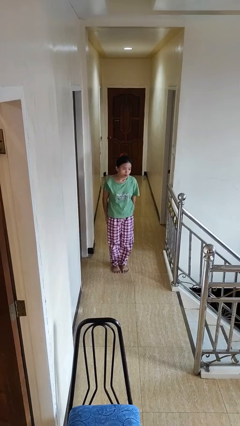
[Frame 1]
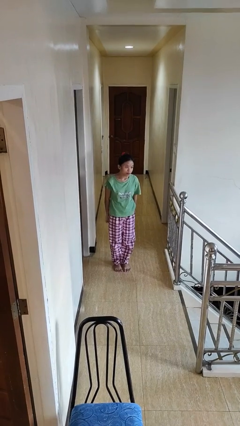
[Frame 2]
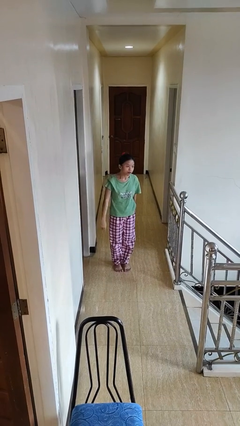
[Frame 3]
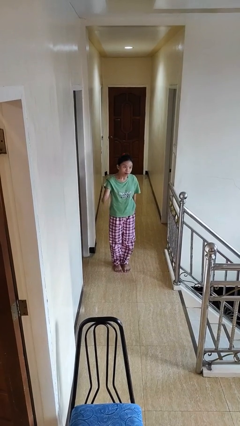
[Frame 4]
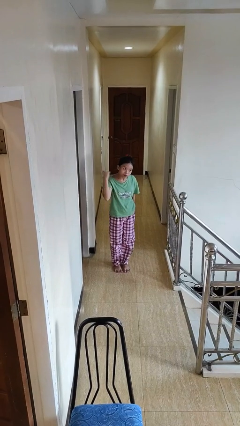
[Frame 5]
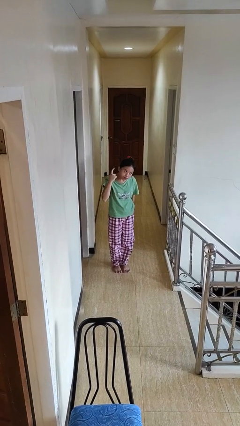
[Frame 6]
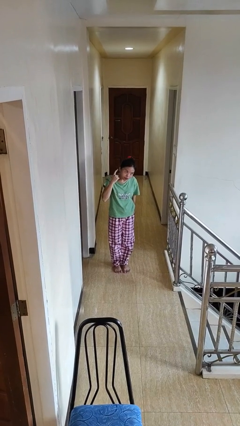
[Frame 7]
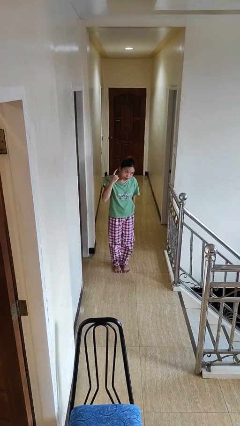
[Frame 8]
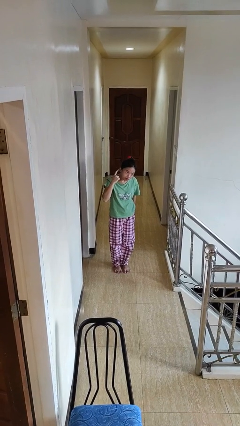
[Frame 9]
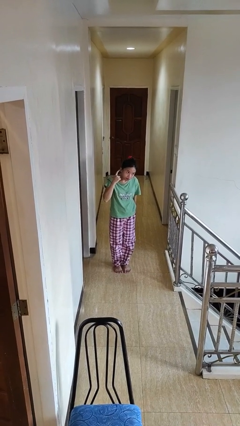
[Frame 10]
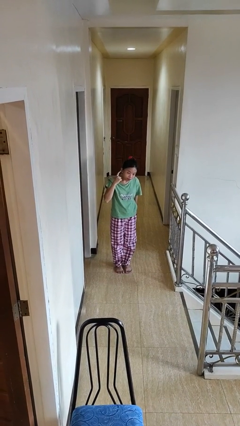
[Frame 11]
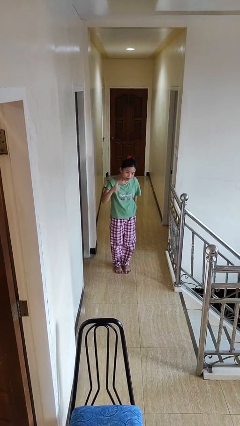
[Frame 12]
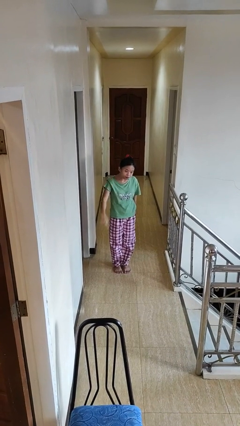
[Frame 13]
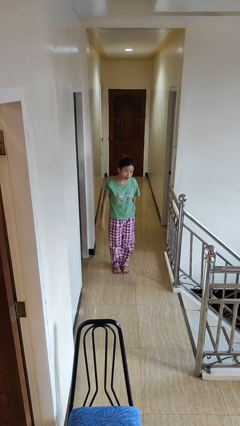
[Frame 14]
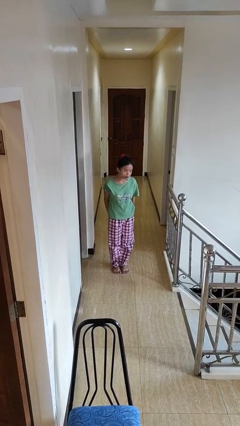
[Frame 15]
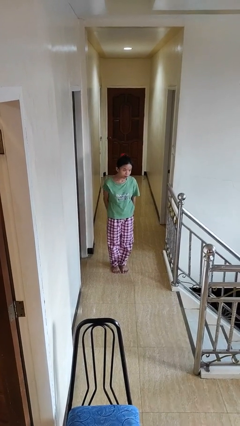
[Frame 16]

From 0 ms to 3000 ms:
person gestures listen closely

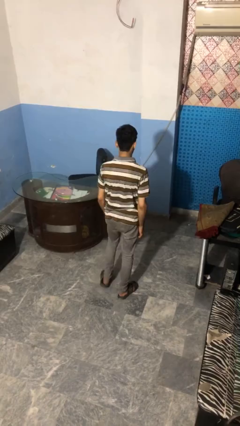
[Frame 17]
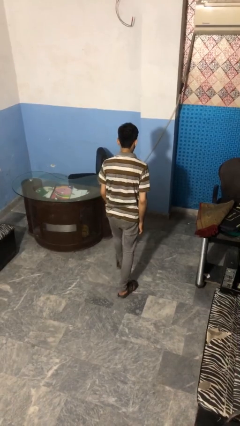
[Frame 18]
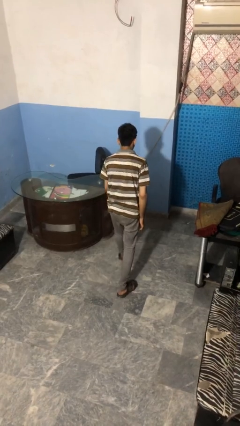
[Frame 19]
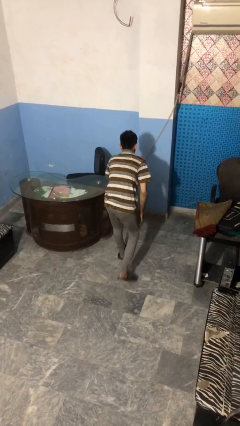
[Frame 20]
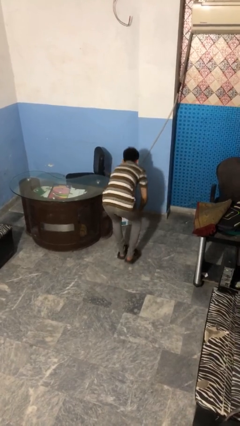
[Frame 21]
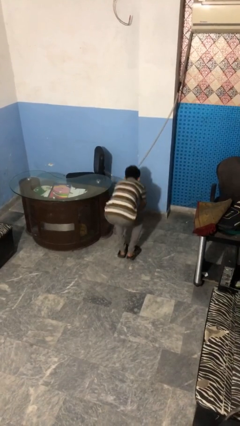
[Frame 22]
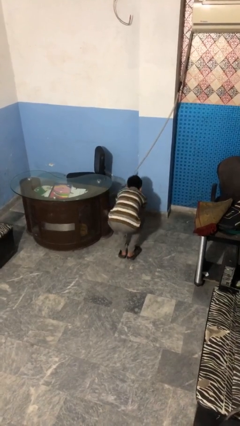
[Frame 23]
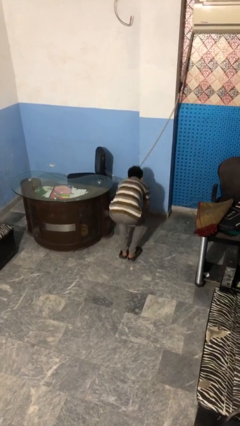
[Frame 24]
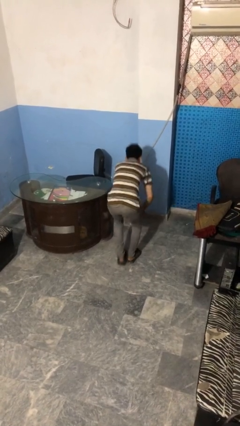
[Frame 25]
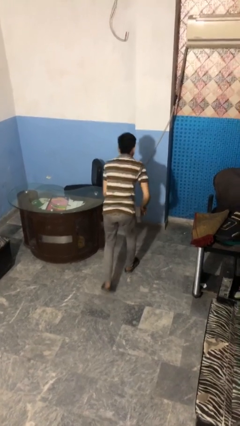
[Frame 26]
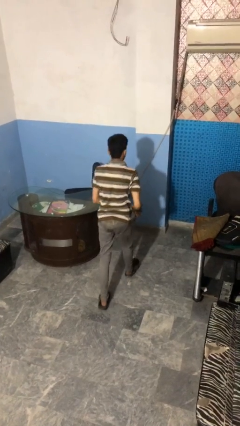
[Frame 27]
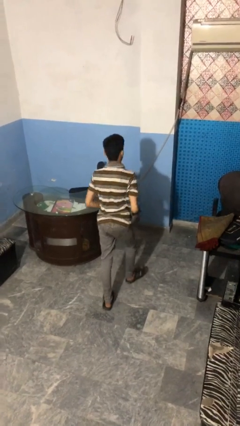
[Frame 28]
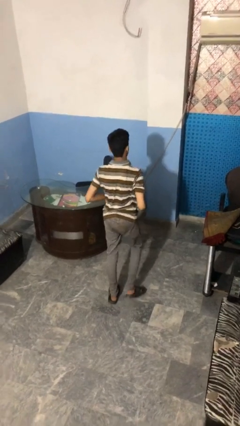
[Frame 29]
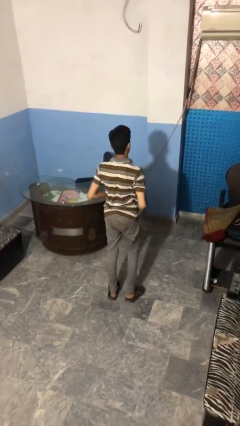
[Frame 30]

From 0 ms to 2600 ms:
person picks up object from floor

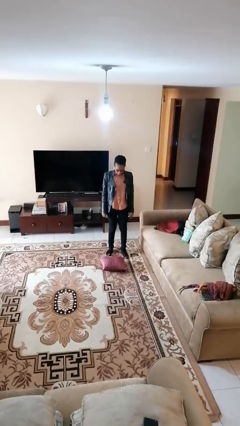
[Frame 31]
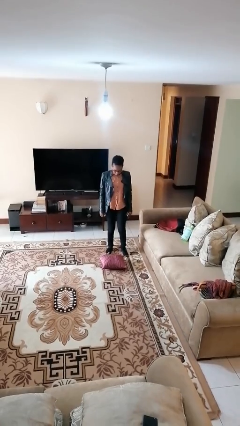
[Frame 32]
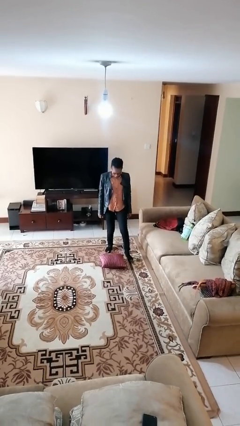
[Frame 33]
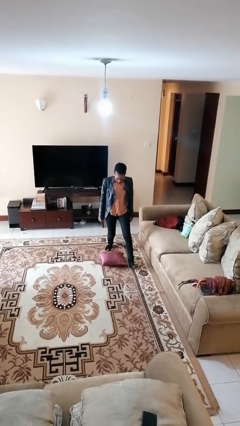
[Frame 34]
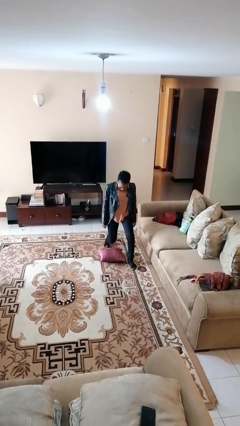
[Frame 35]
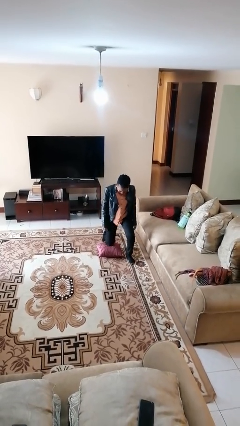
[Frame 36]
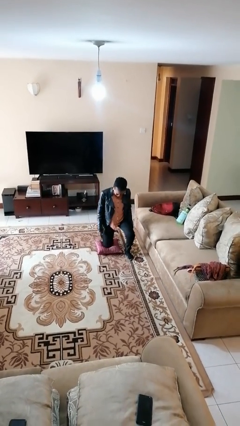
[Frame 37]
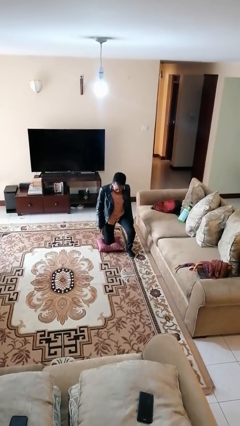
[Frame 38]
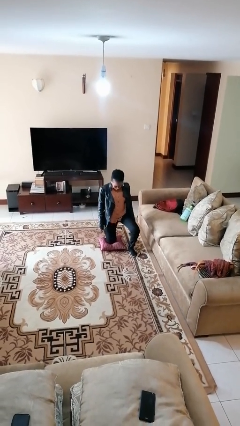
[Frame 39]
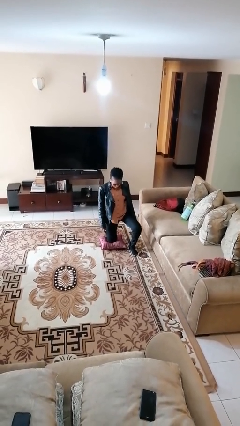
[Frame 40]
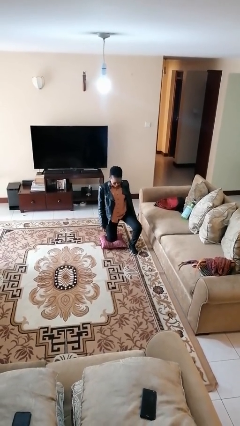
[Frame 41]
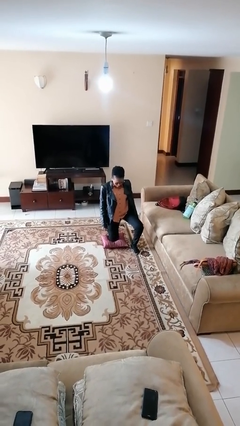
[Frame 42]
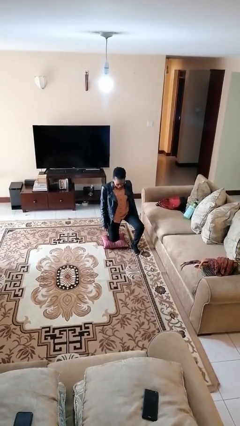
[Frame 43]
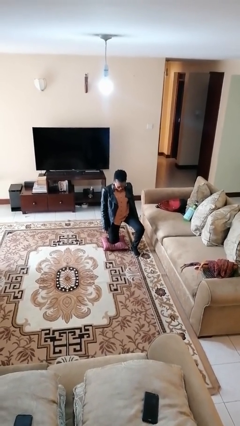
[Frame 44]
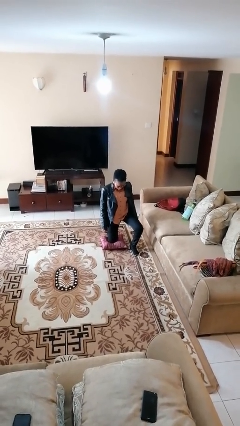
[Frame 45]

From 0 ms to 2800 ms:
person kneels

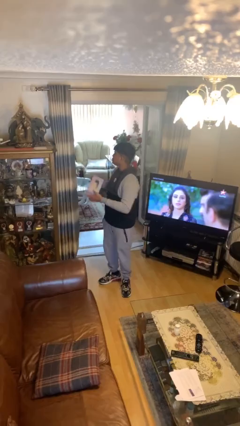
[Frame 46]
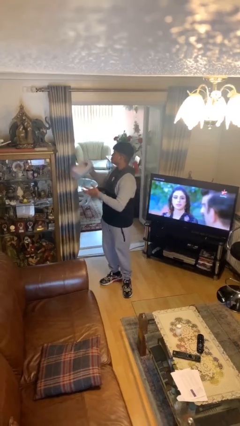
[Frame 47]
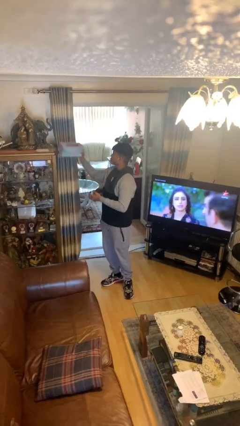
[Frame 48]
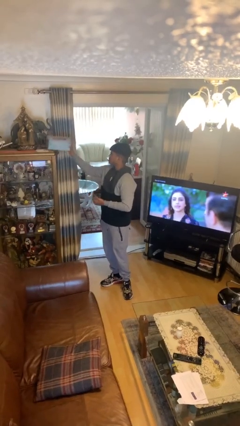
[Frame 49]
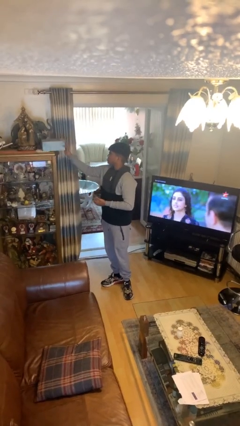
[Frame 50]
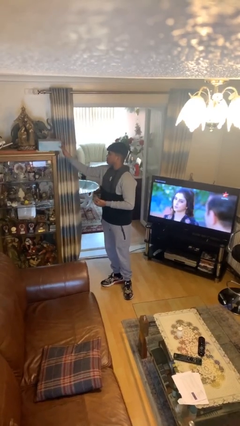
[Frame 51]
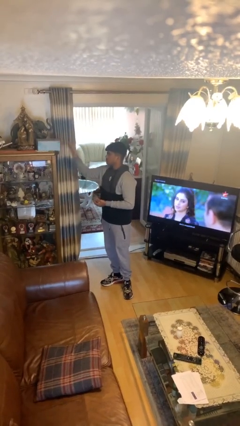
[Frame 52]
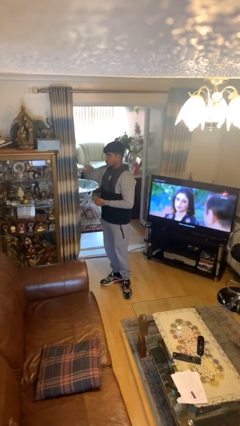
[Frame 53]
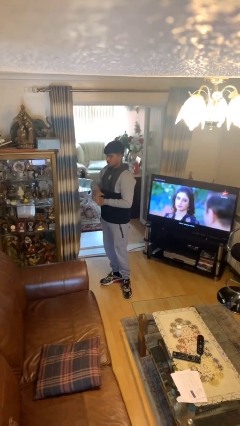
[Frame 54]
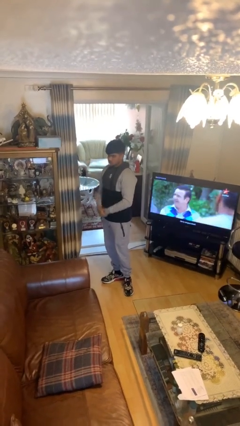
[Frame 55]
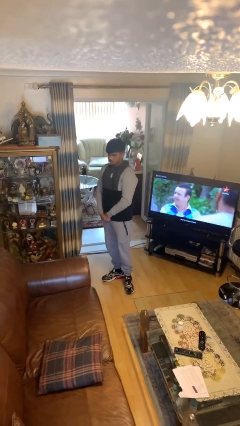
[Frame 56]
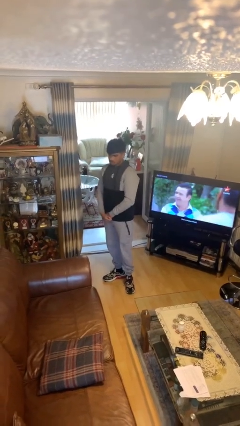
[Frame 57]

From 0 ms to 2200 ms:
person puts down object on shelf

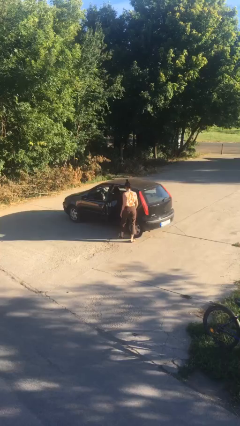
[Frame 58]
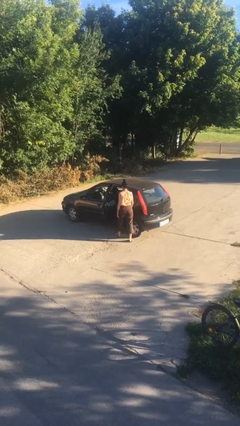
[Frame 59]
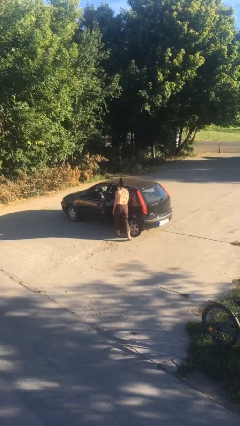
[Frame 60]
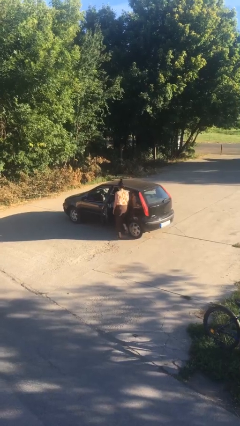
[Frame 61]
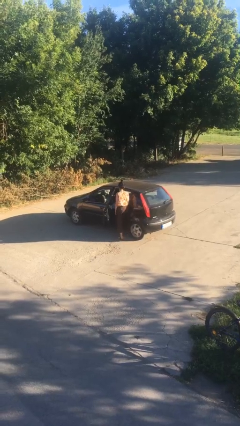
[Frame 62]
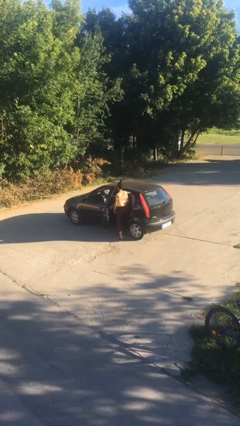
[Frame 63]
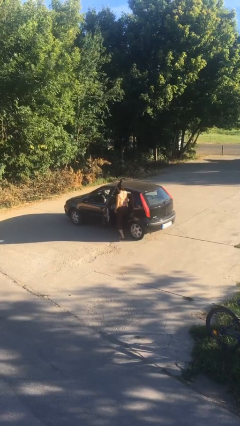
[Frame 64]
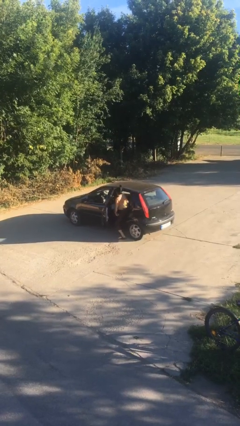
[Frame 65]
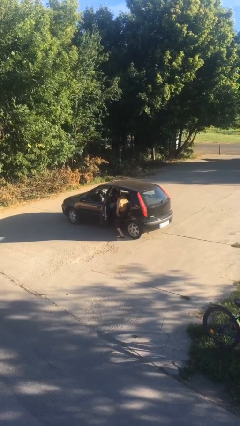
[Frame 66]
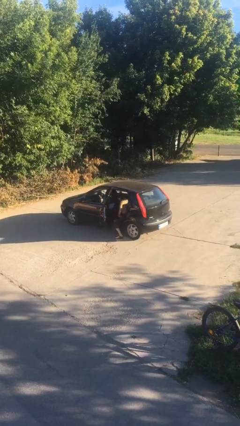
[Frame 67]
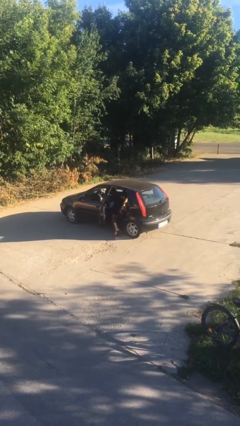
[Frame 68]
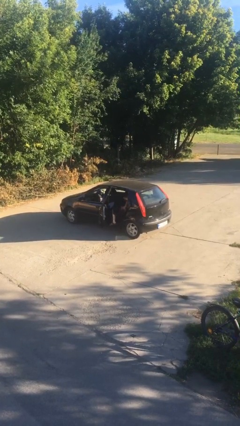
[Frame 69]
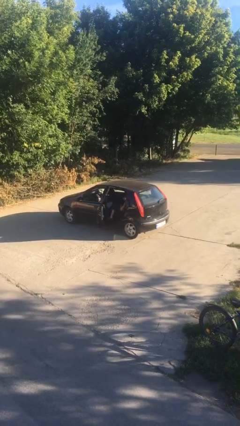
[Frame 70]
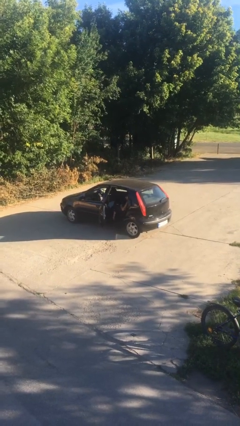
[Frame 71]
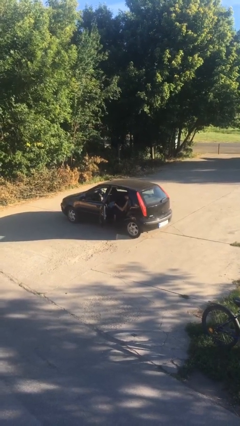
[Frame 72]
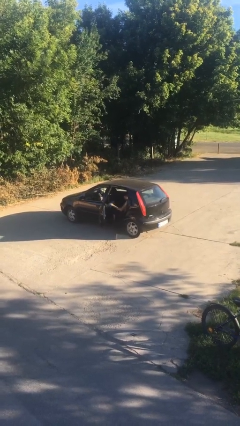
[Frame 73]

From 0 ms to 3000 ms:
person enters car

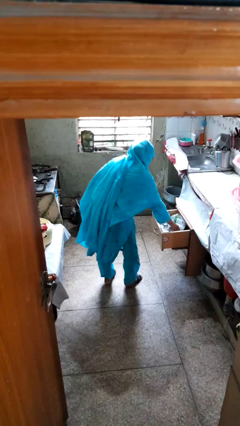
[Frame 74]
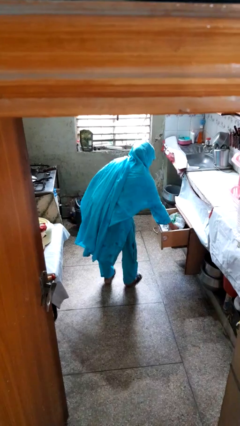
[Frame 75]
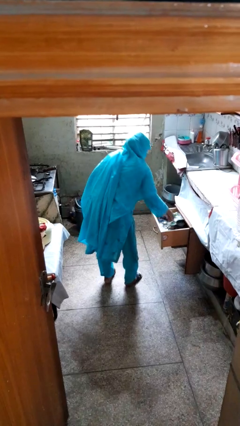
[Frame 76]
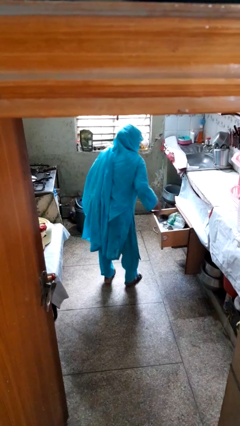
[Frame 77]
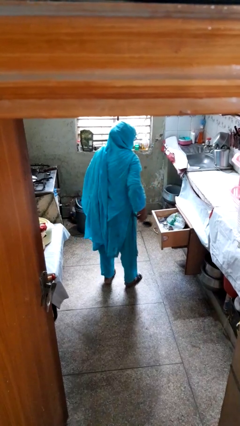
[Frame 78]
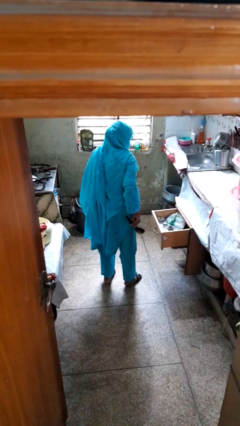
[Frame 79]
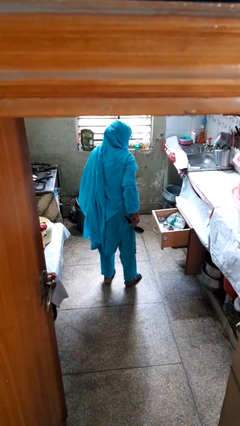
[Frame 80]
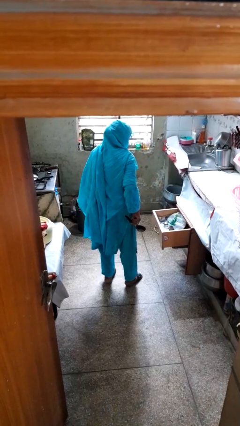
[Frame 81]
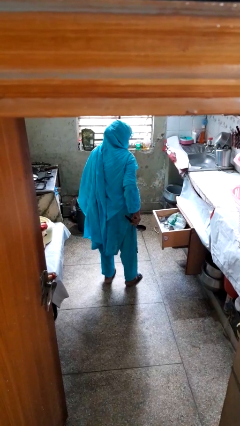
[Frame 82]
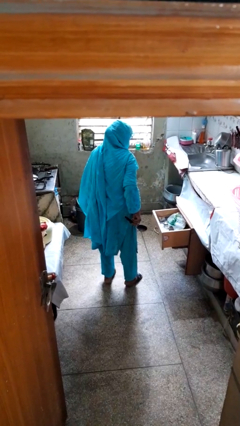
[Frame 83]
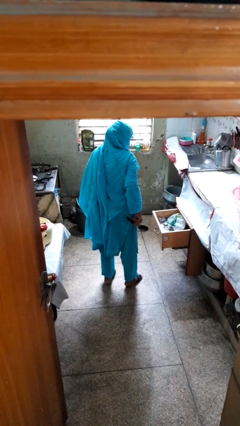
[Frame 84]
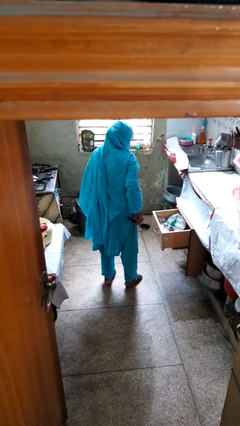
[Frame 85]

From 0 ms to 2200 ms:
person takes object from kitchen drawer

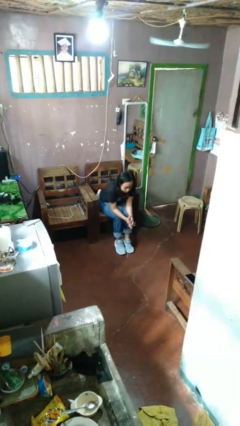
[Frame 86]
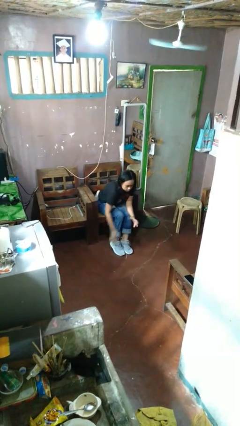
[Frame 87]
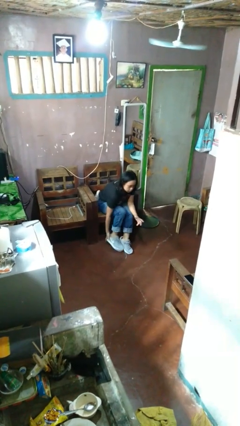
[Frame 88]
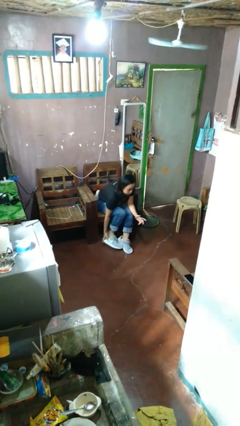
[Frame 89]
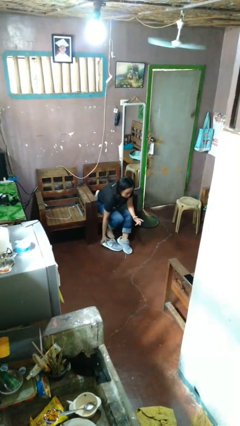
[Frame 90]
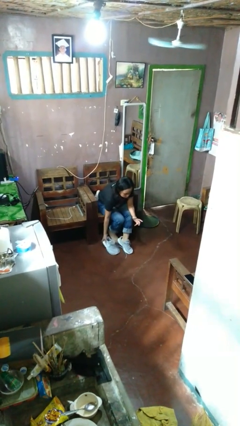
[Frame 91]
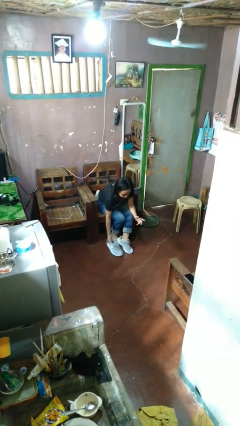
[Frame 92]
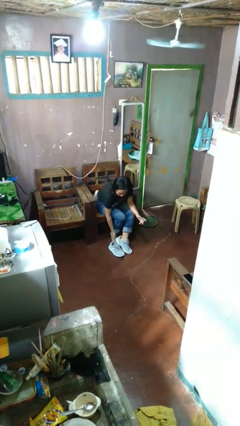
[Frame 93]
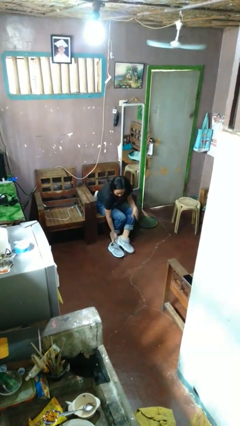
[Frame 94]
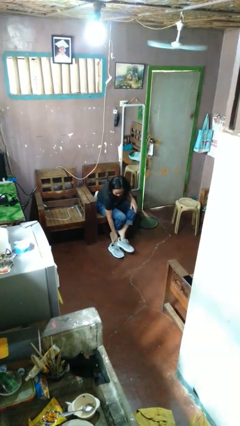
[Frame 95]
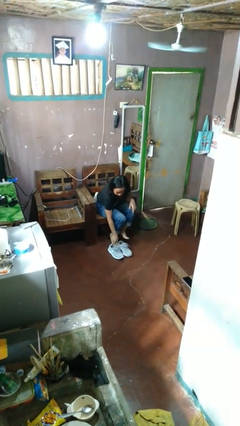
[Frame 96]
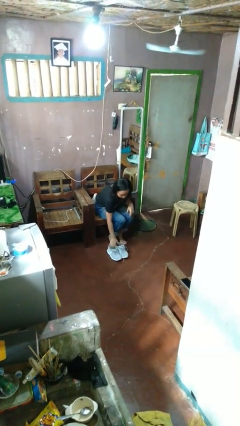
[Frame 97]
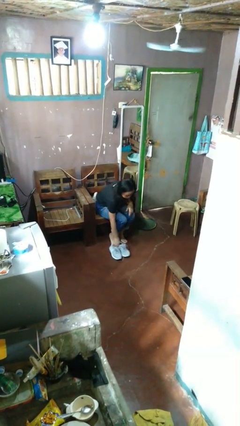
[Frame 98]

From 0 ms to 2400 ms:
person takes off shoes
